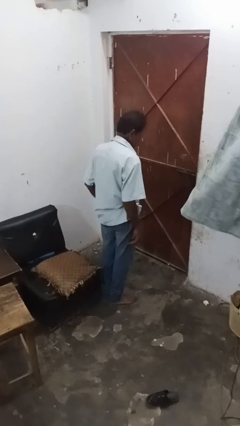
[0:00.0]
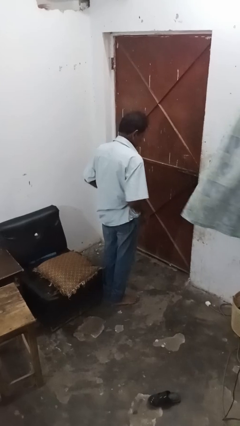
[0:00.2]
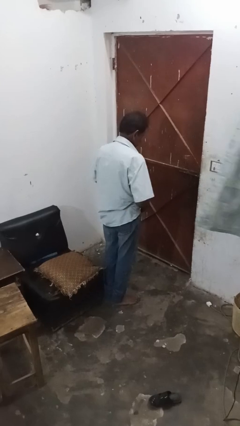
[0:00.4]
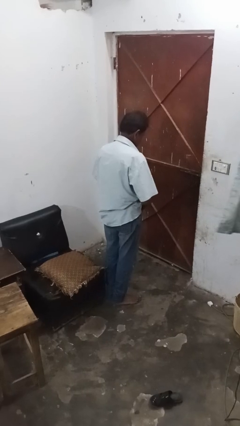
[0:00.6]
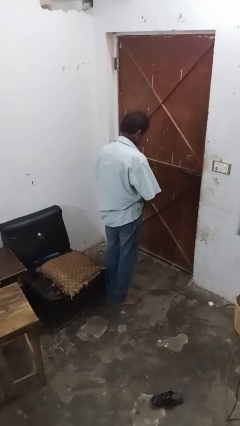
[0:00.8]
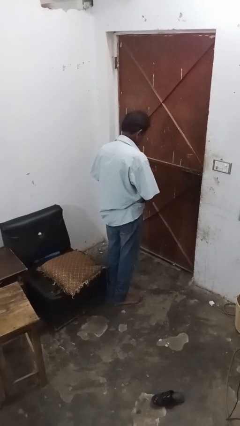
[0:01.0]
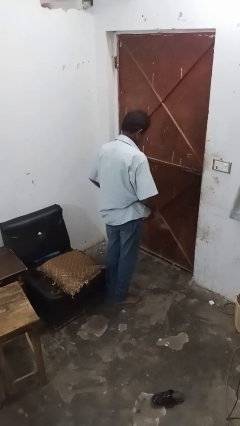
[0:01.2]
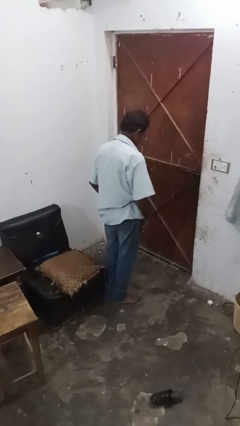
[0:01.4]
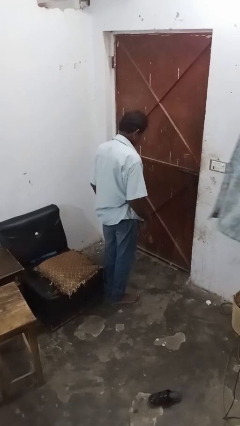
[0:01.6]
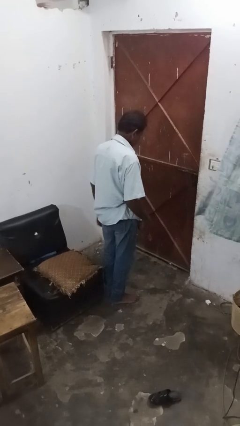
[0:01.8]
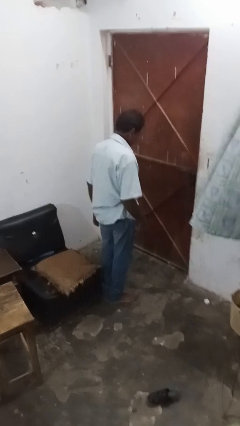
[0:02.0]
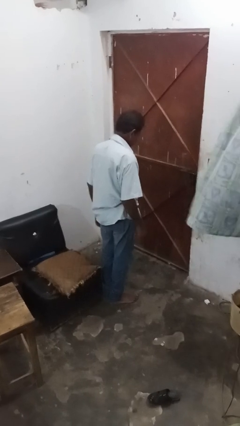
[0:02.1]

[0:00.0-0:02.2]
person takes off belt

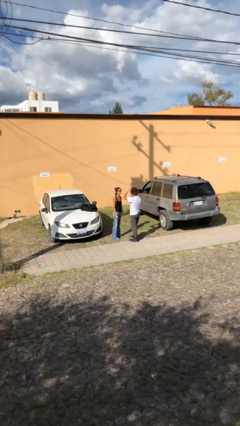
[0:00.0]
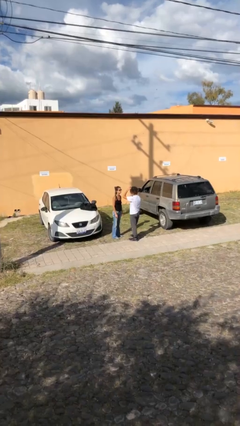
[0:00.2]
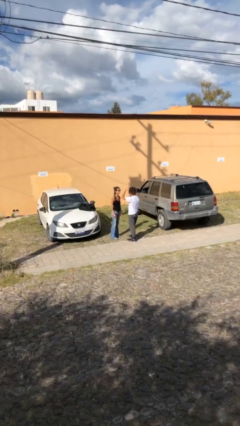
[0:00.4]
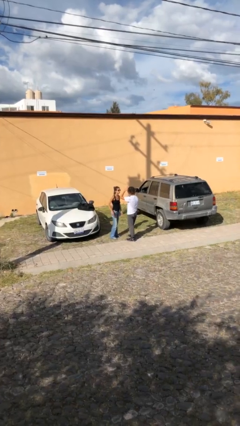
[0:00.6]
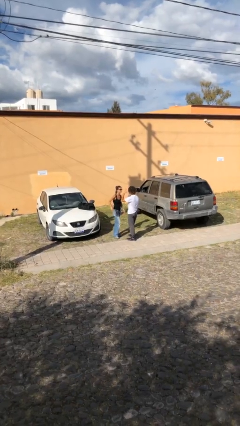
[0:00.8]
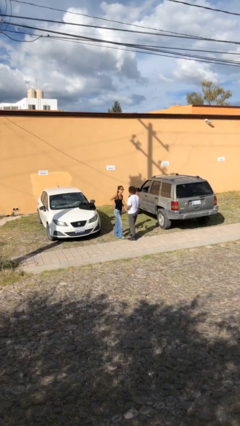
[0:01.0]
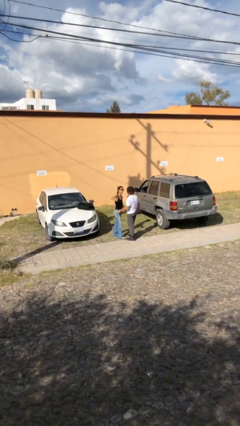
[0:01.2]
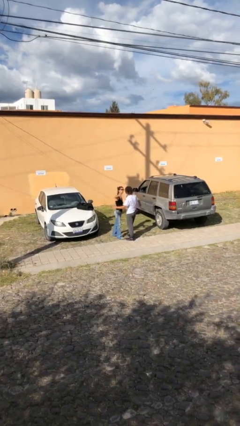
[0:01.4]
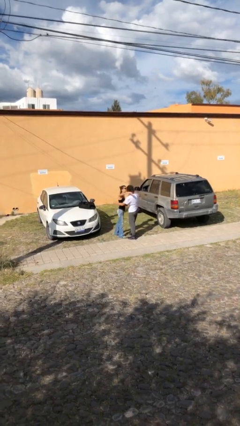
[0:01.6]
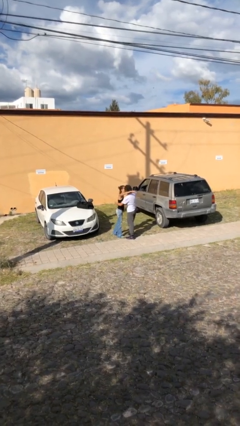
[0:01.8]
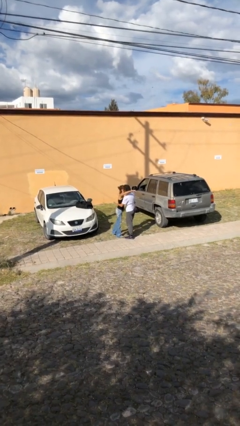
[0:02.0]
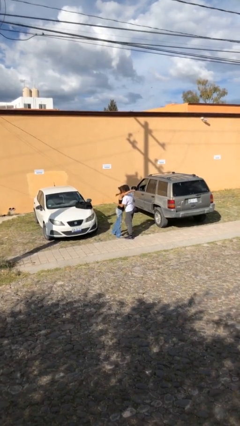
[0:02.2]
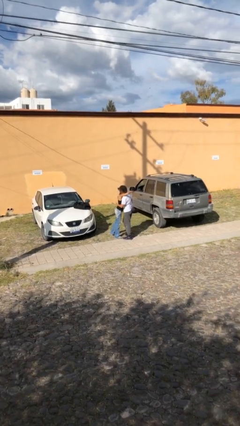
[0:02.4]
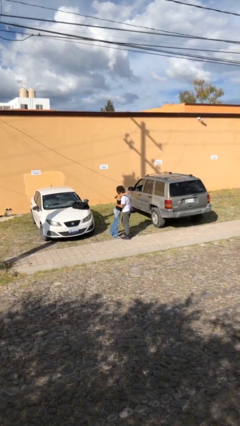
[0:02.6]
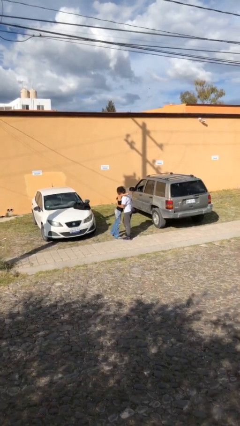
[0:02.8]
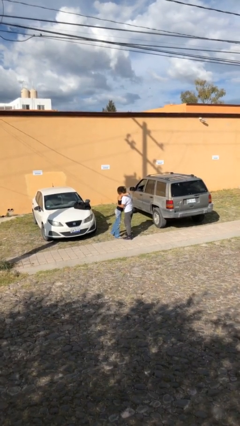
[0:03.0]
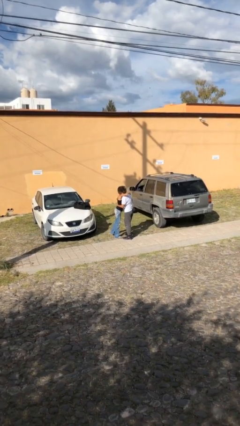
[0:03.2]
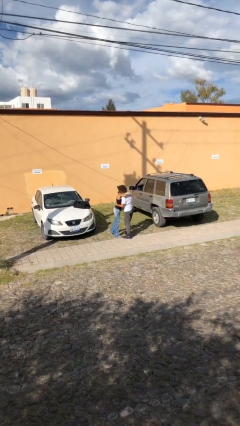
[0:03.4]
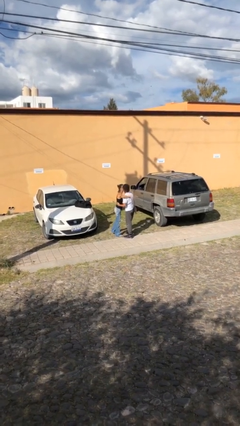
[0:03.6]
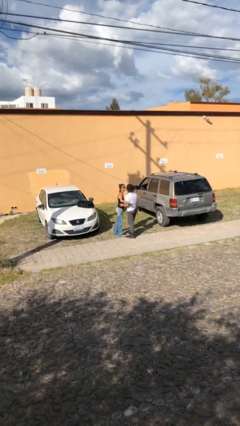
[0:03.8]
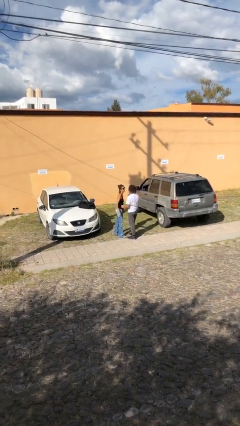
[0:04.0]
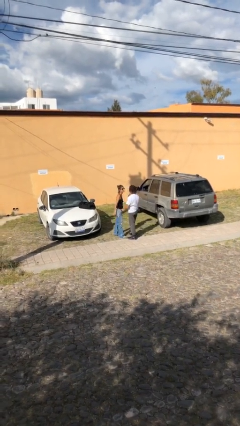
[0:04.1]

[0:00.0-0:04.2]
person embraces person

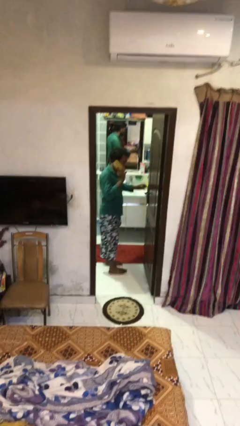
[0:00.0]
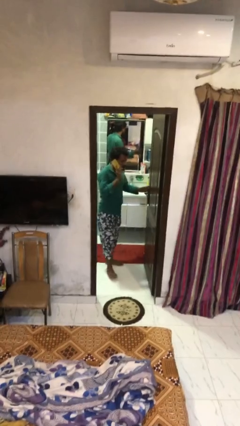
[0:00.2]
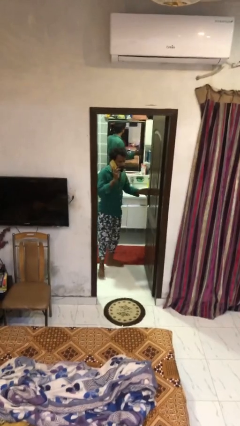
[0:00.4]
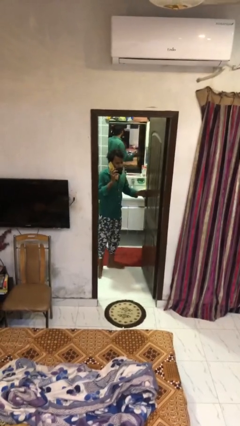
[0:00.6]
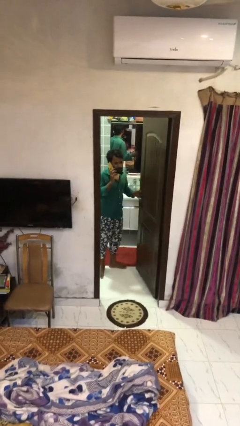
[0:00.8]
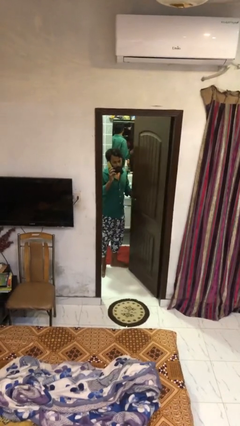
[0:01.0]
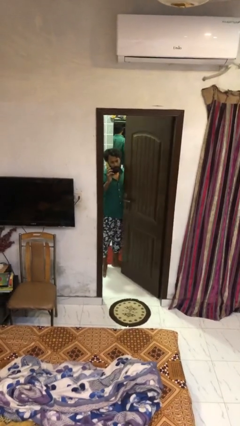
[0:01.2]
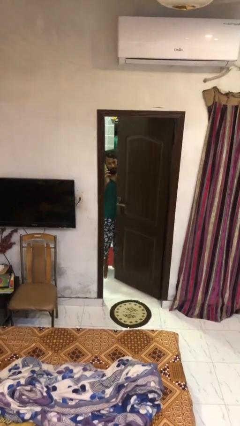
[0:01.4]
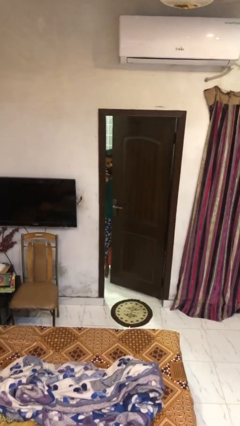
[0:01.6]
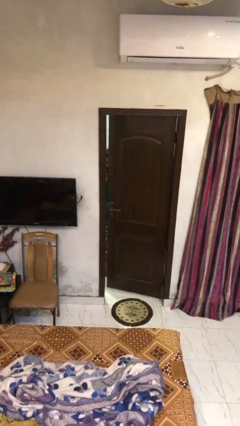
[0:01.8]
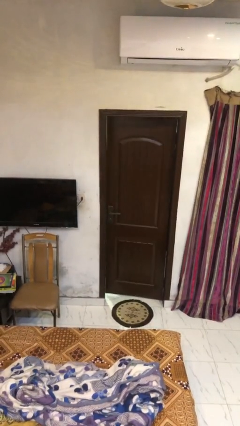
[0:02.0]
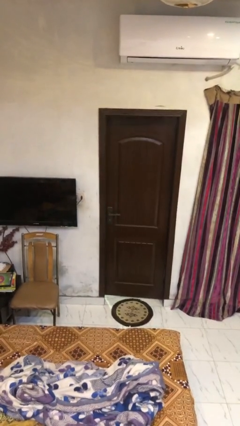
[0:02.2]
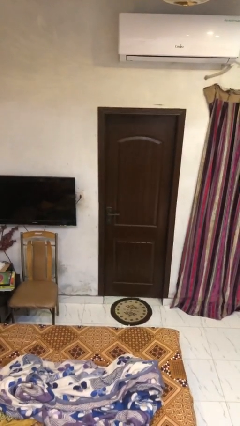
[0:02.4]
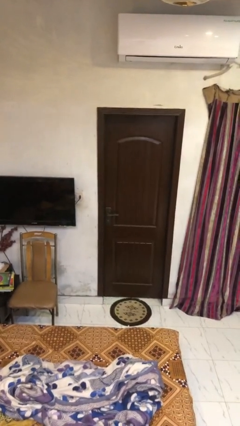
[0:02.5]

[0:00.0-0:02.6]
person closes facility door

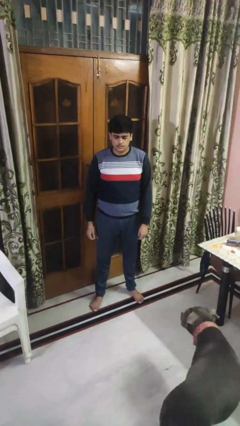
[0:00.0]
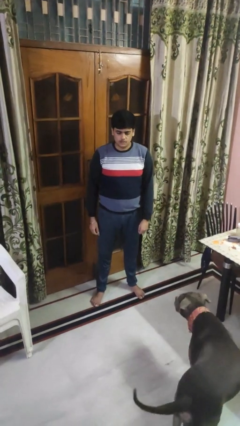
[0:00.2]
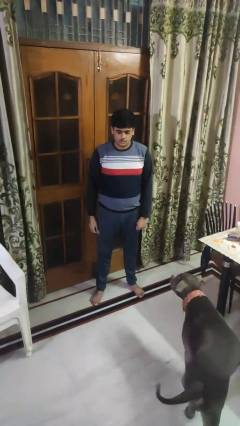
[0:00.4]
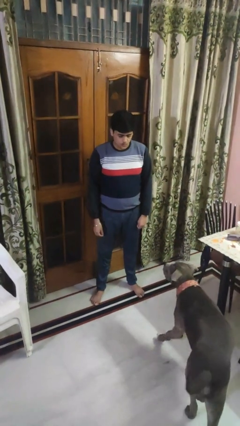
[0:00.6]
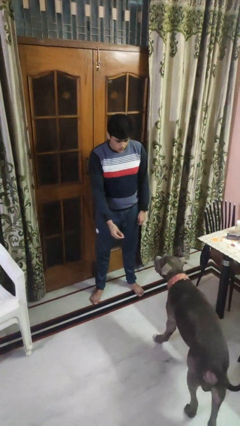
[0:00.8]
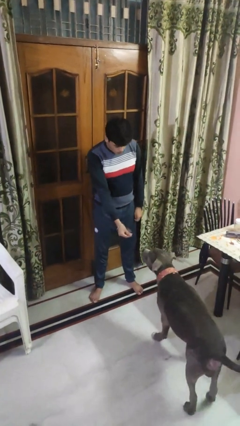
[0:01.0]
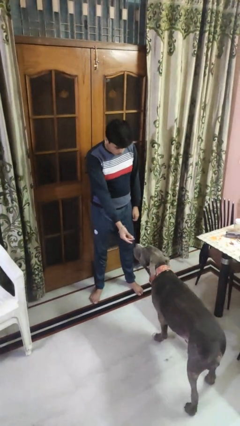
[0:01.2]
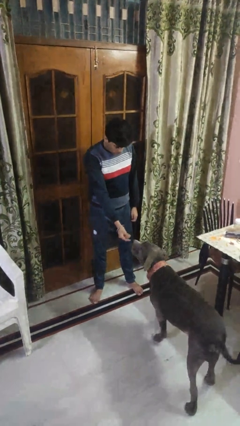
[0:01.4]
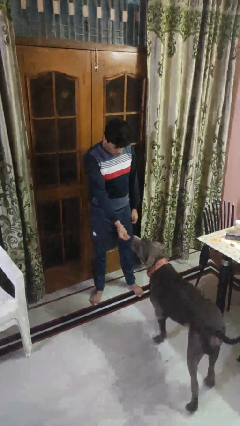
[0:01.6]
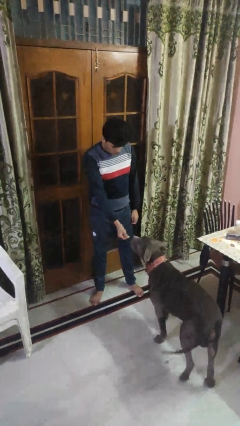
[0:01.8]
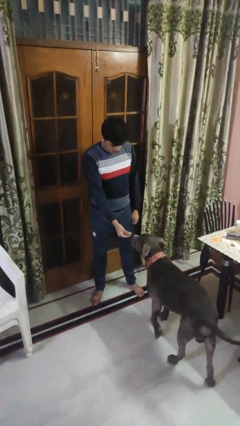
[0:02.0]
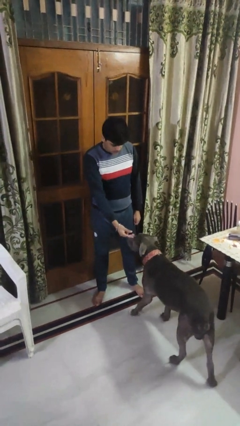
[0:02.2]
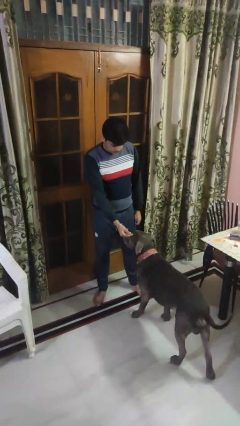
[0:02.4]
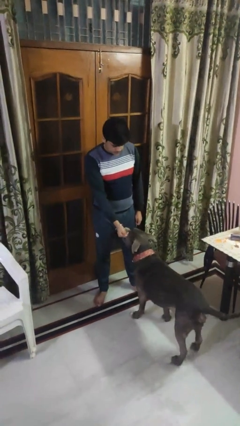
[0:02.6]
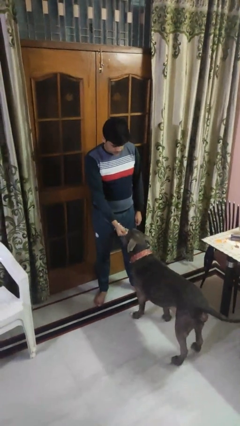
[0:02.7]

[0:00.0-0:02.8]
person points to dog

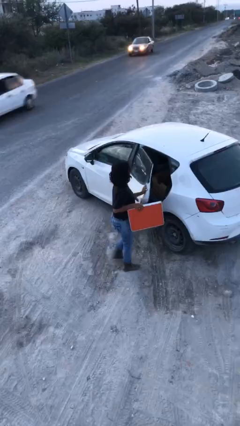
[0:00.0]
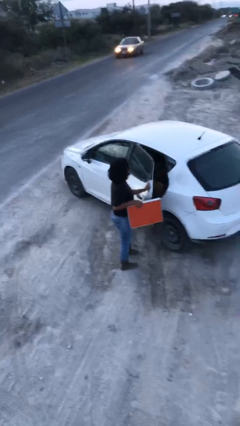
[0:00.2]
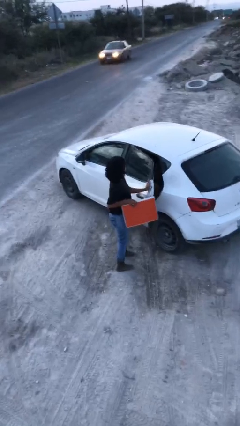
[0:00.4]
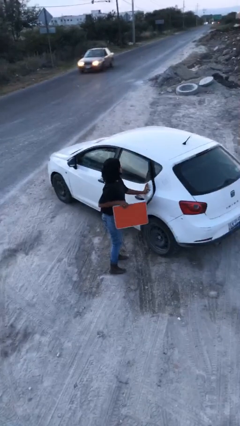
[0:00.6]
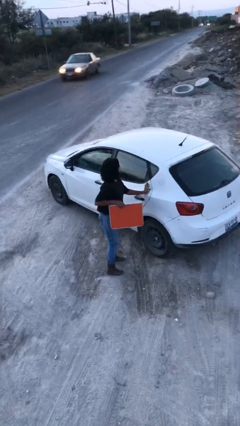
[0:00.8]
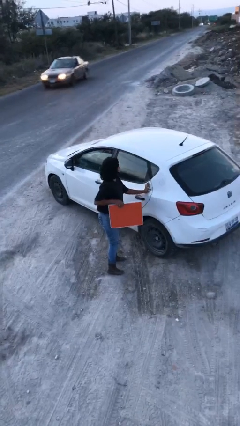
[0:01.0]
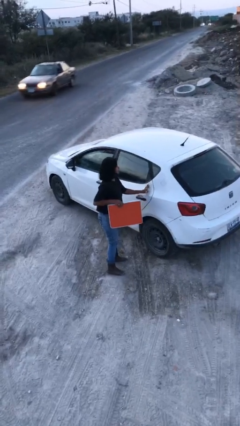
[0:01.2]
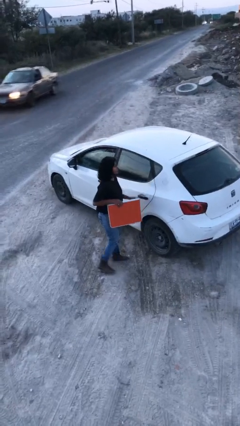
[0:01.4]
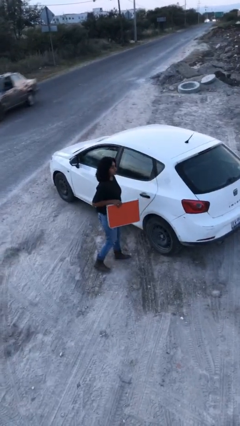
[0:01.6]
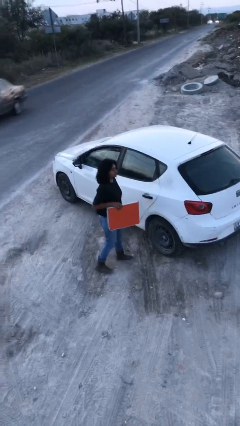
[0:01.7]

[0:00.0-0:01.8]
person closes car door

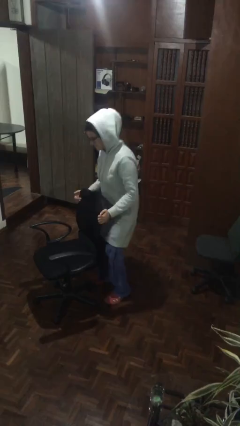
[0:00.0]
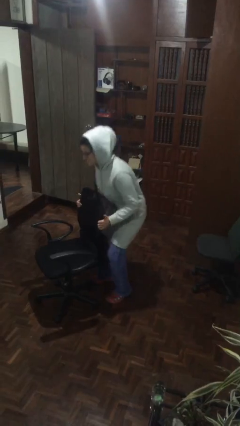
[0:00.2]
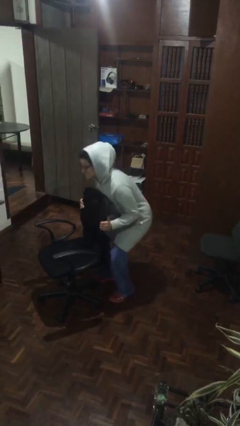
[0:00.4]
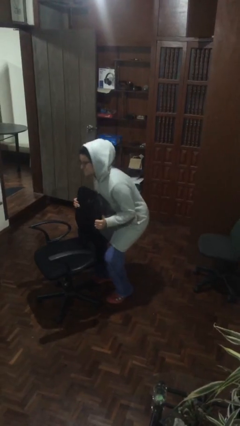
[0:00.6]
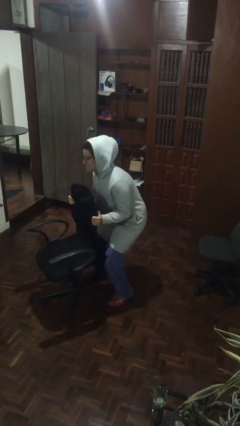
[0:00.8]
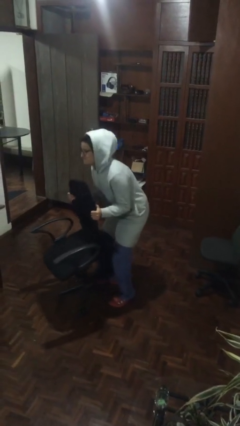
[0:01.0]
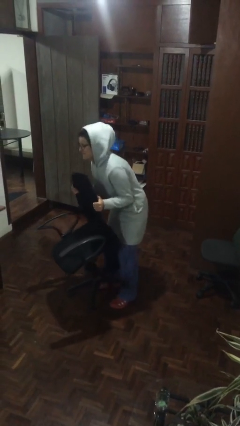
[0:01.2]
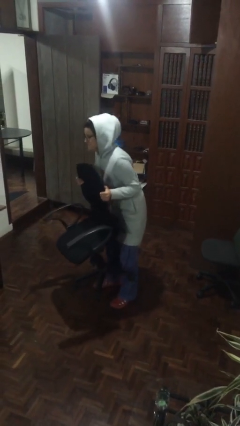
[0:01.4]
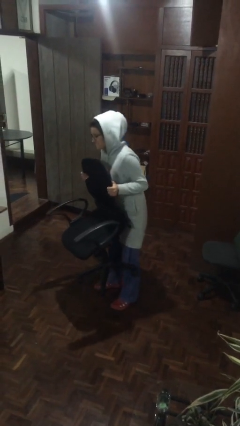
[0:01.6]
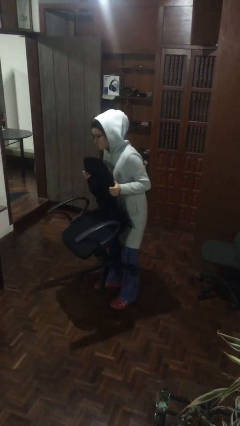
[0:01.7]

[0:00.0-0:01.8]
person picks up object from floor

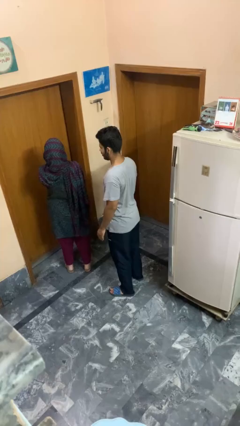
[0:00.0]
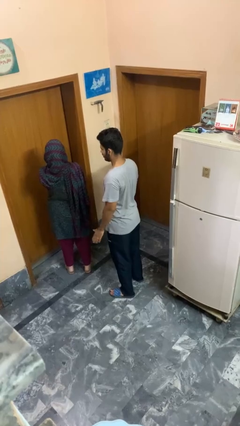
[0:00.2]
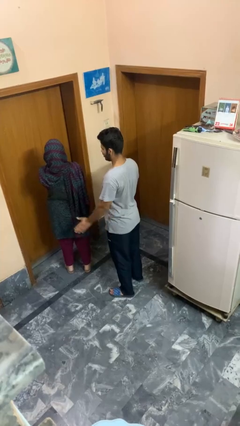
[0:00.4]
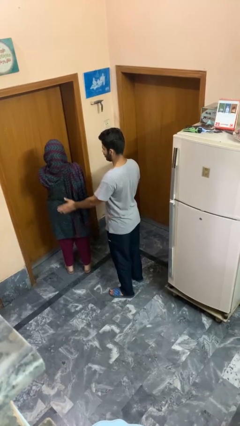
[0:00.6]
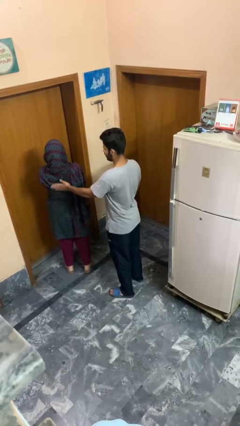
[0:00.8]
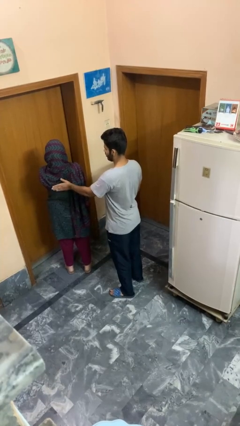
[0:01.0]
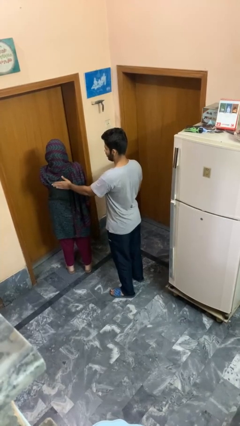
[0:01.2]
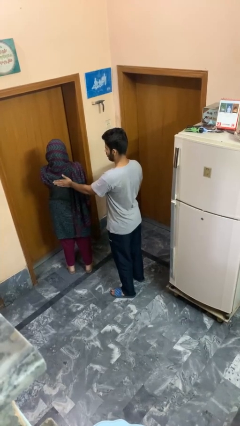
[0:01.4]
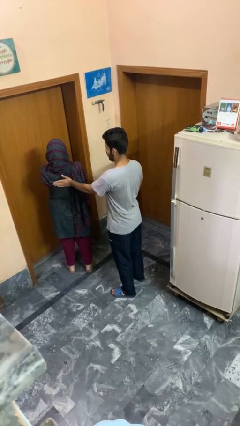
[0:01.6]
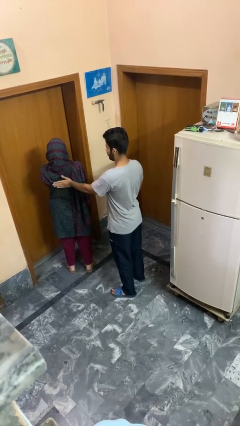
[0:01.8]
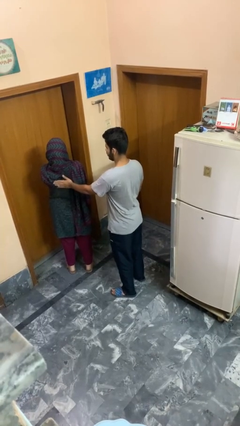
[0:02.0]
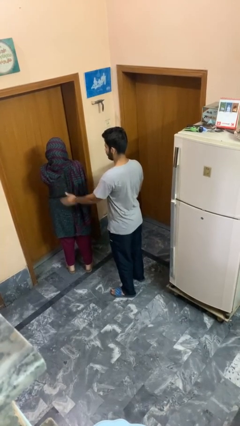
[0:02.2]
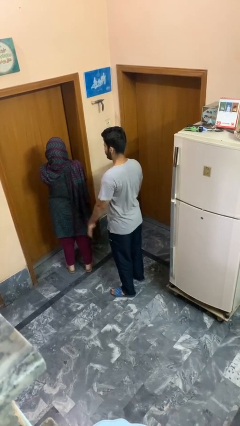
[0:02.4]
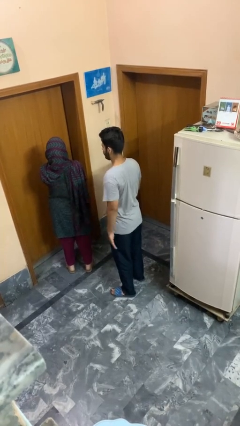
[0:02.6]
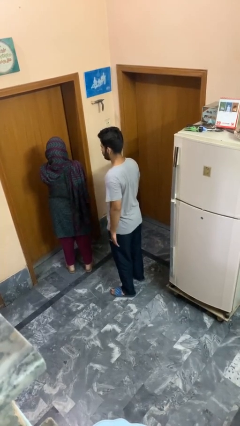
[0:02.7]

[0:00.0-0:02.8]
person touches back of person
